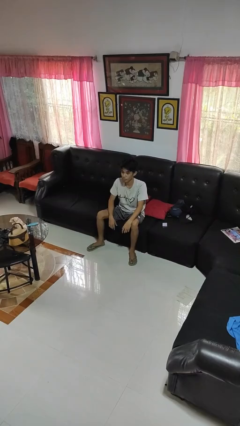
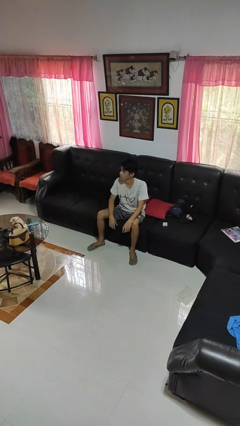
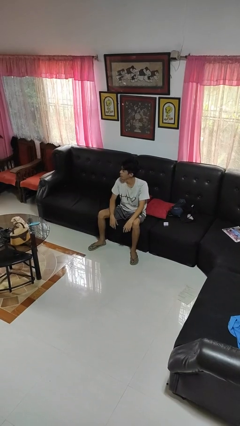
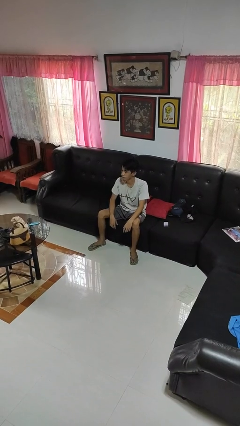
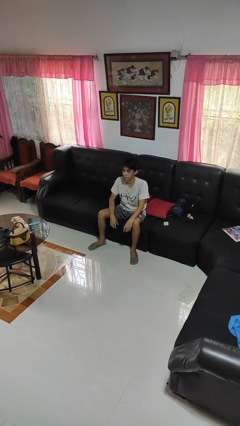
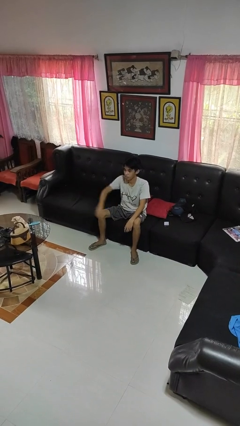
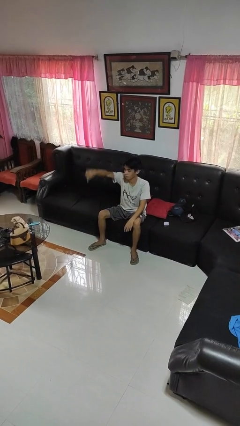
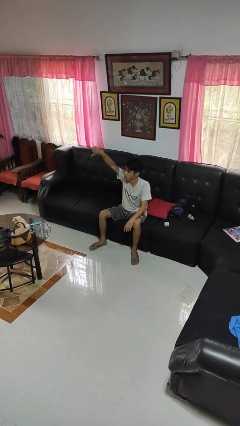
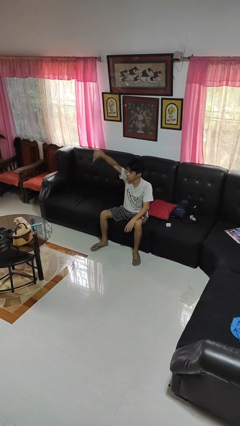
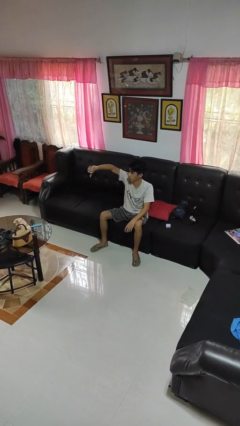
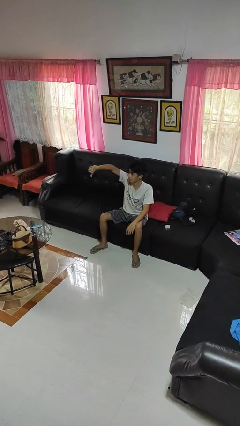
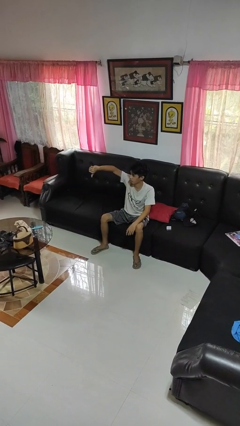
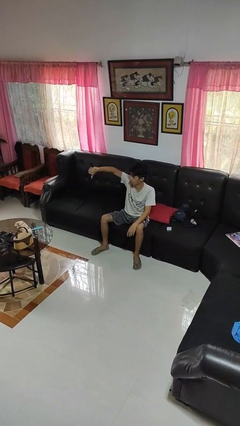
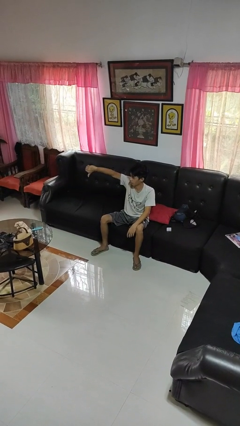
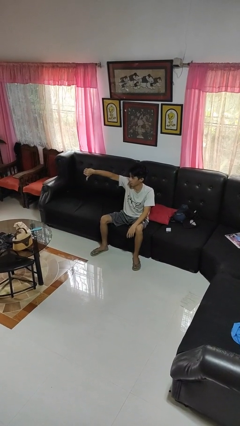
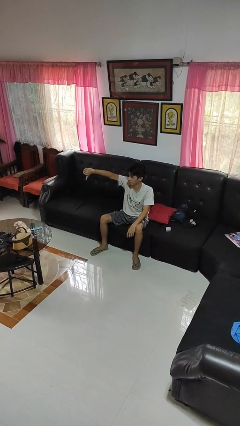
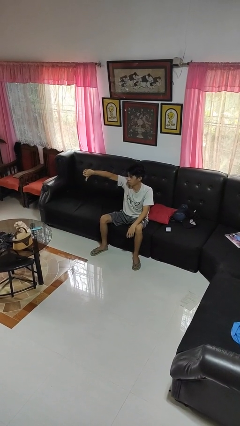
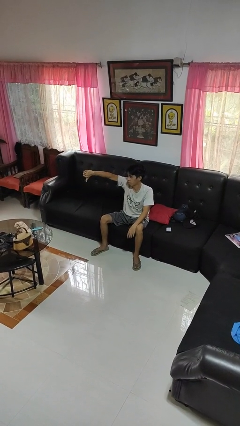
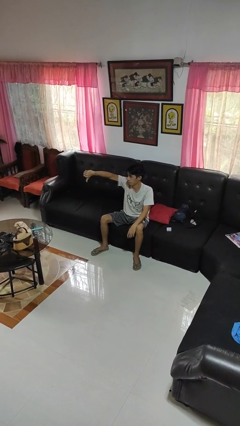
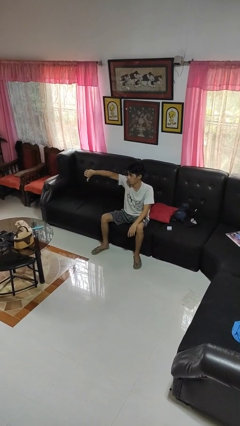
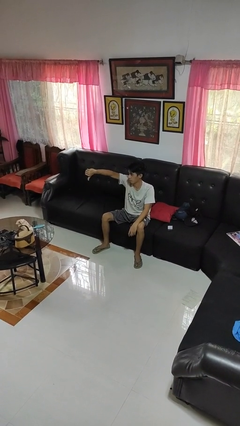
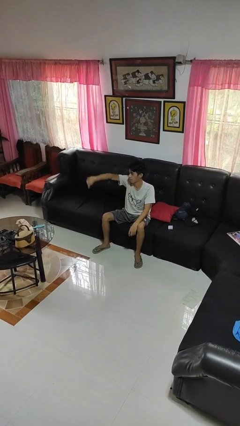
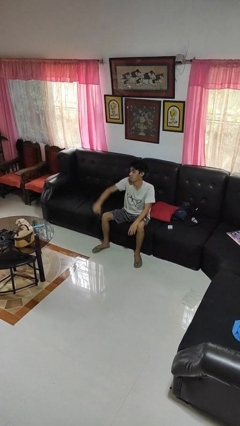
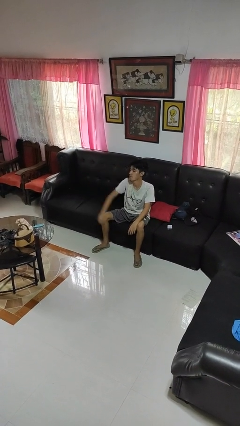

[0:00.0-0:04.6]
person gestures thumbs down

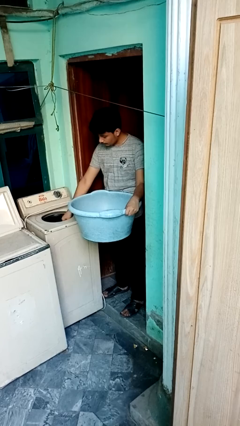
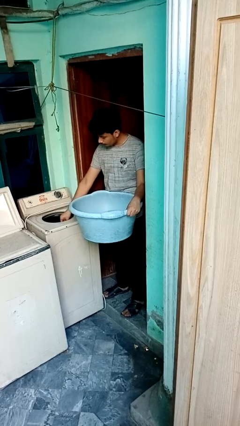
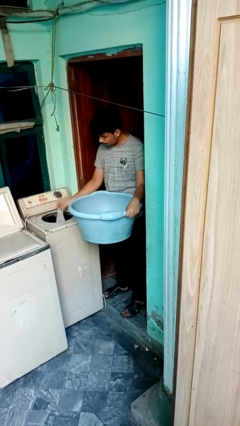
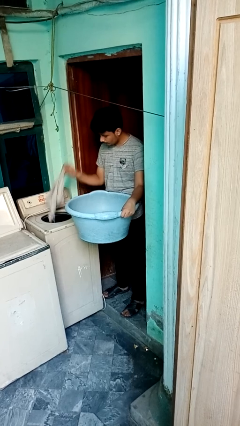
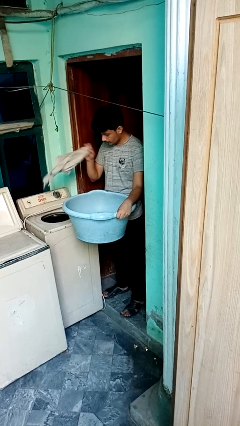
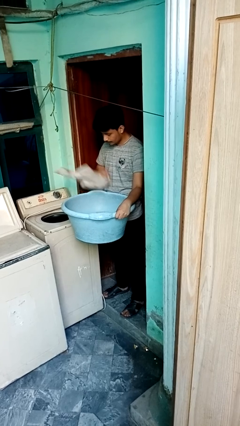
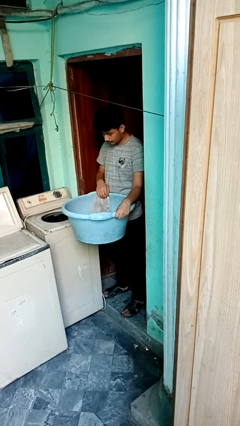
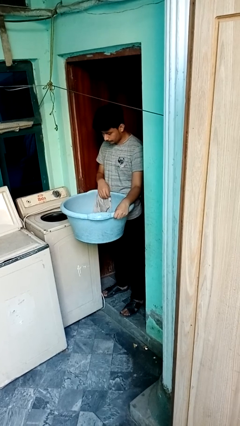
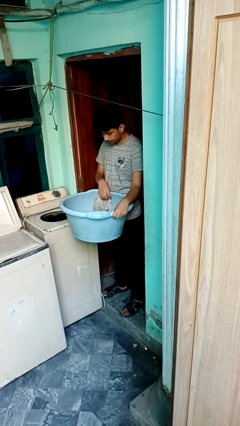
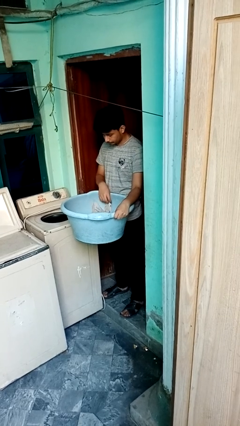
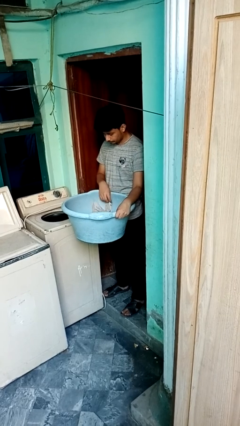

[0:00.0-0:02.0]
person unloads dryer

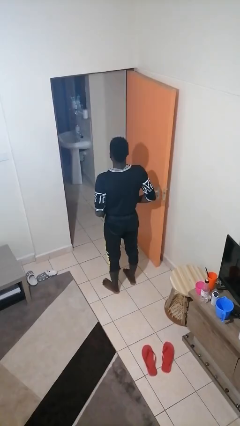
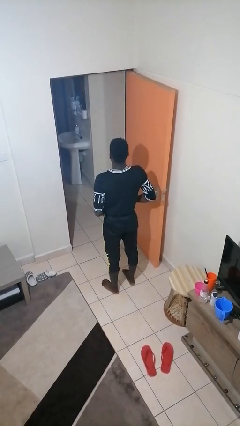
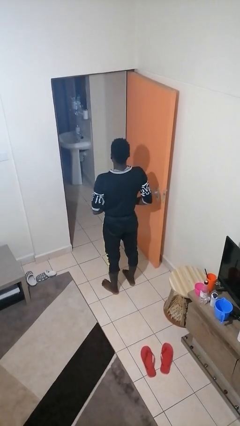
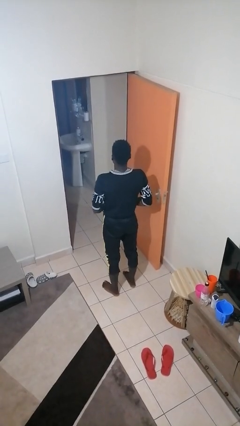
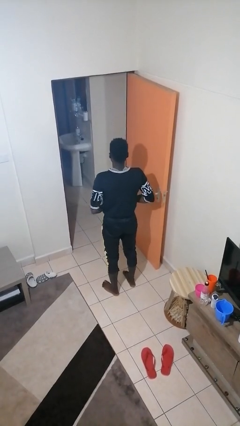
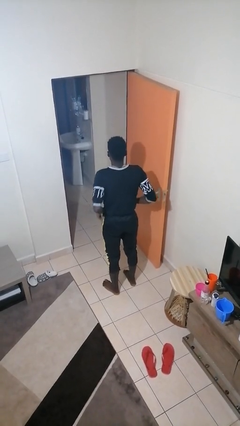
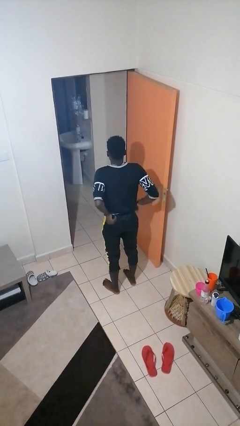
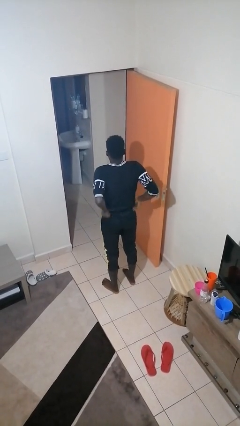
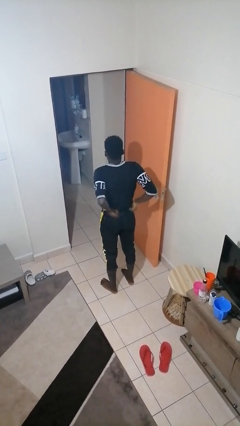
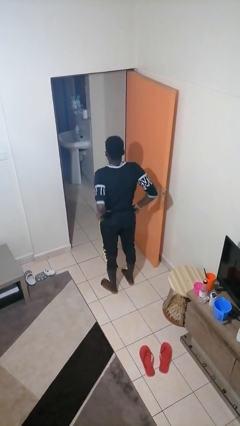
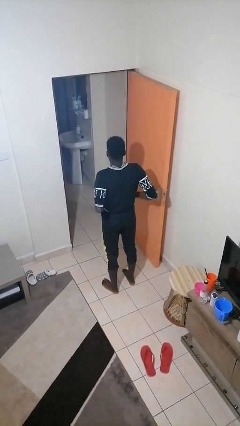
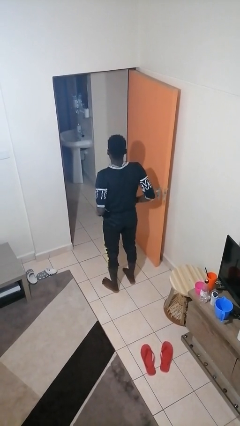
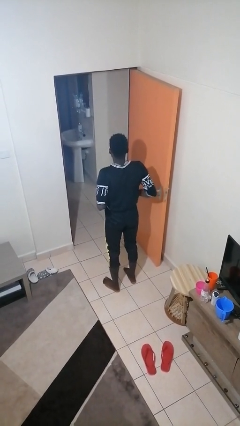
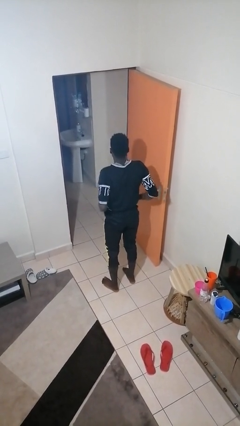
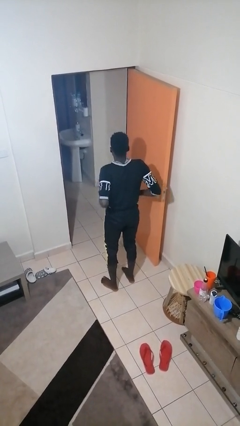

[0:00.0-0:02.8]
person hikes up pants

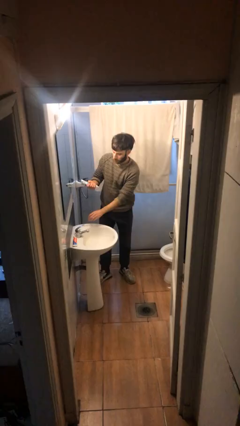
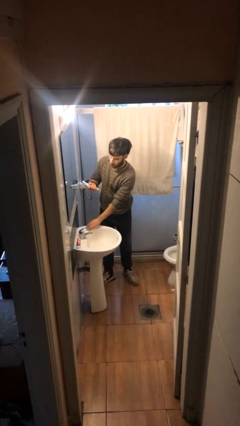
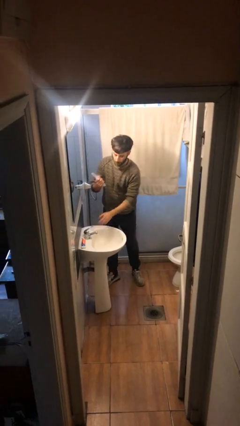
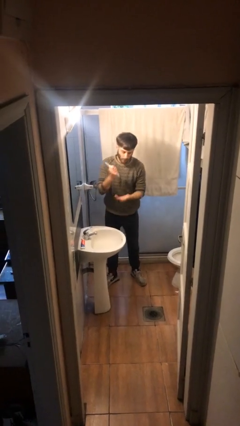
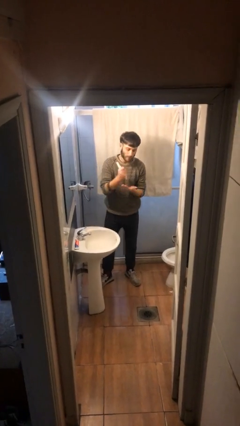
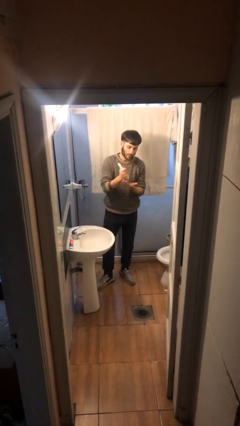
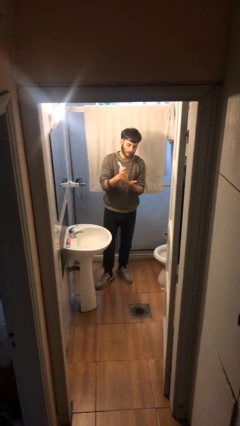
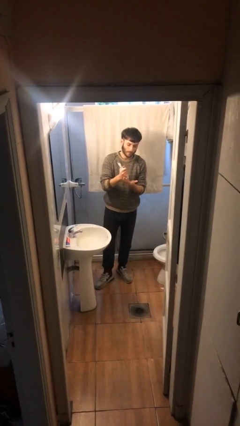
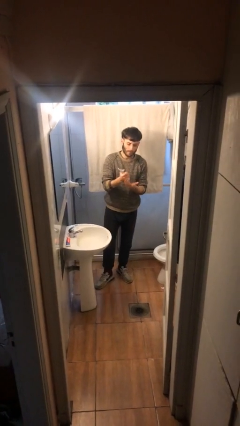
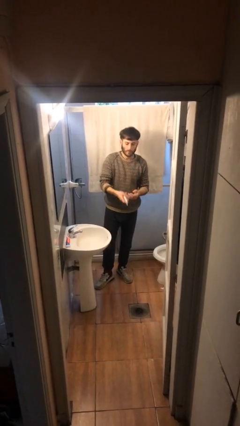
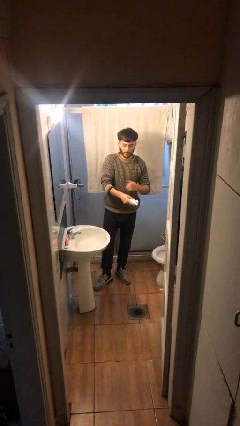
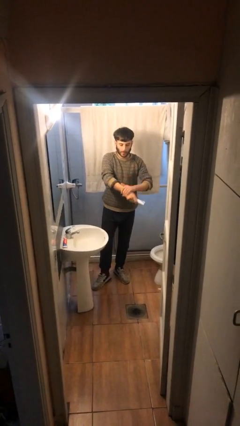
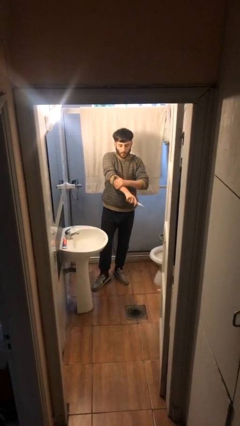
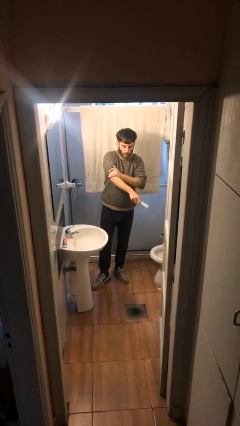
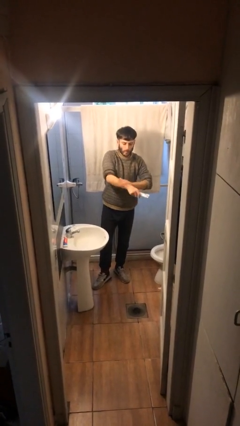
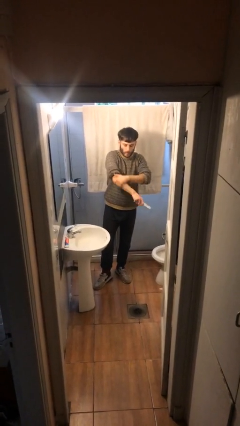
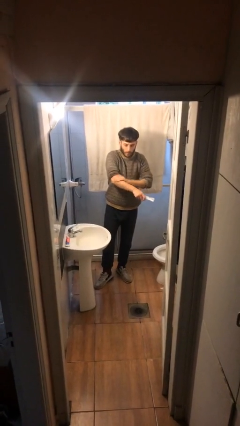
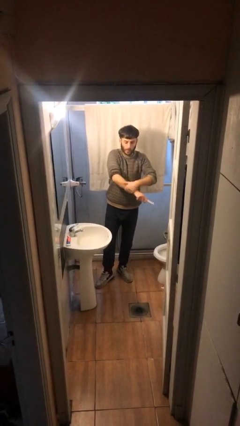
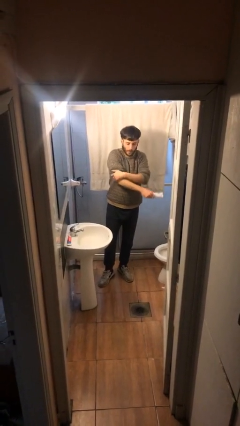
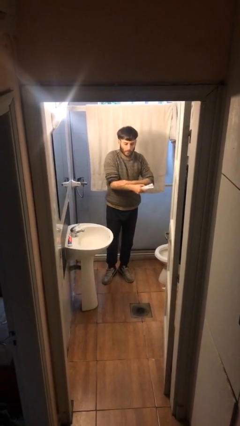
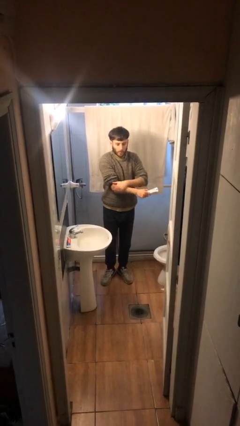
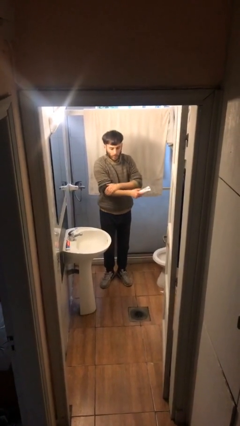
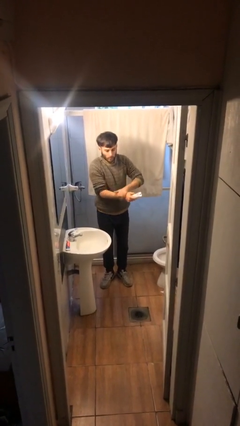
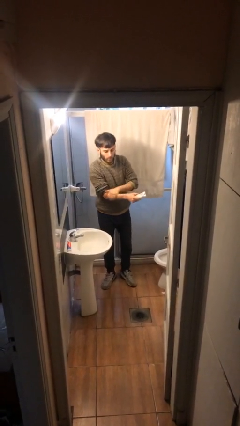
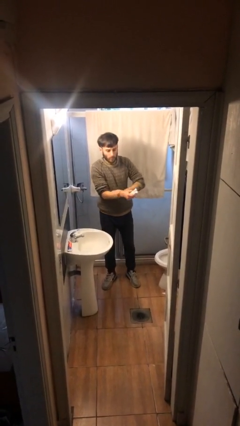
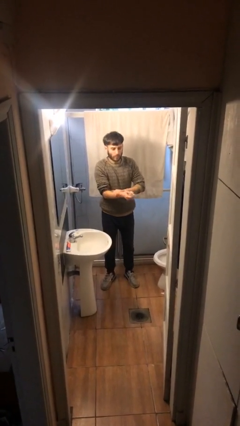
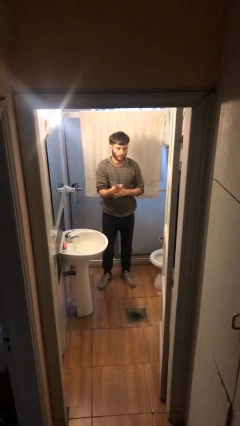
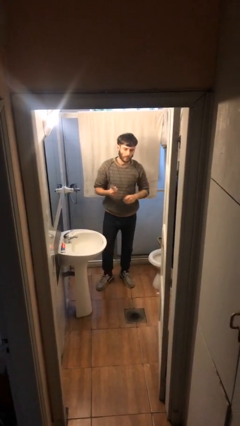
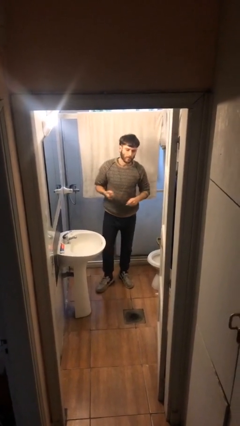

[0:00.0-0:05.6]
person applies sunscreen

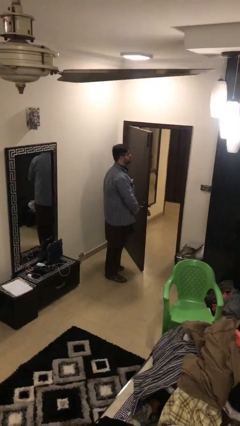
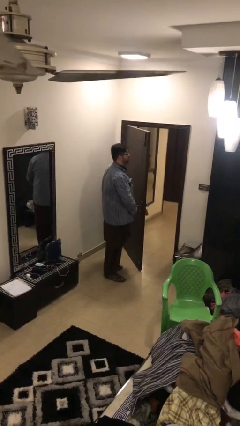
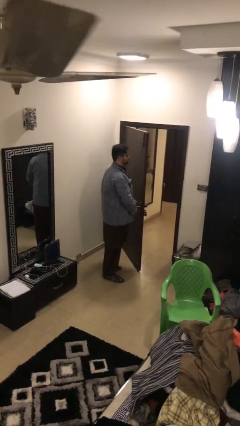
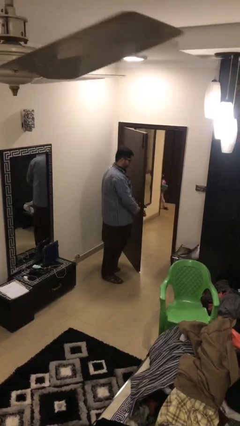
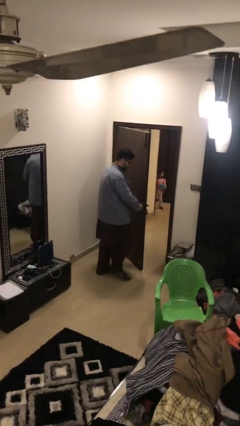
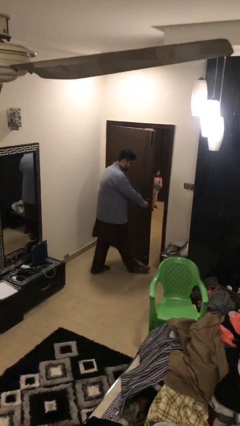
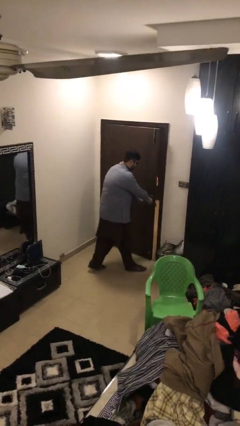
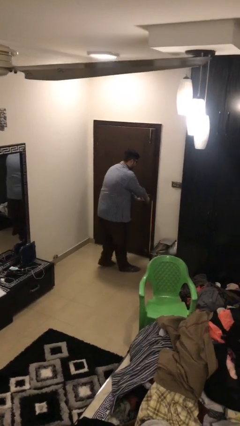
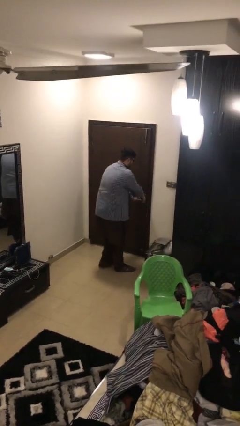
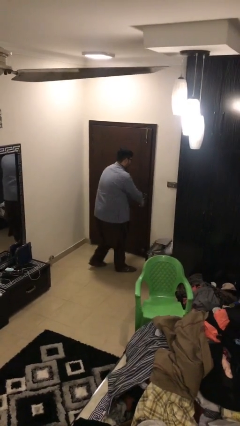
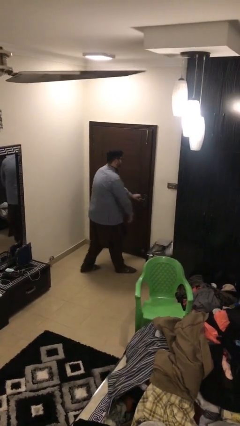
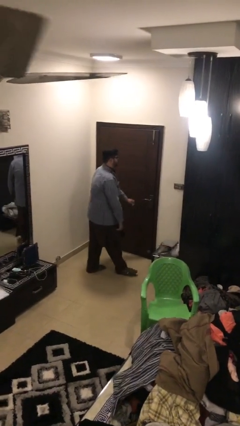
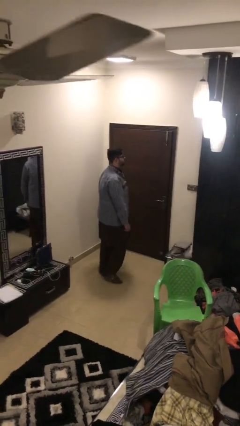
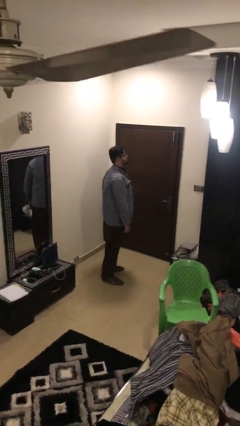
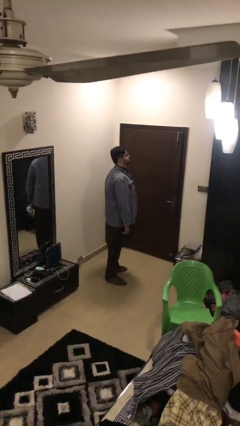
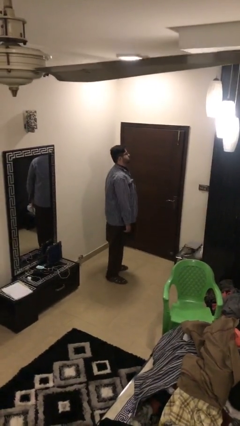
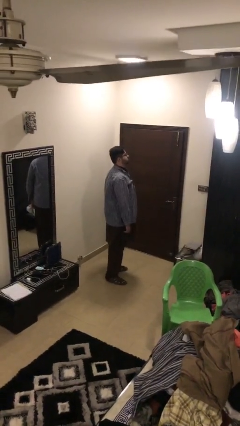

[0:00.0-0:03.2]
person closes facility door
